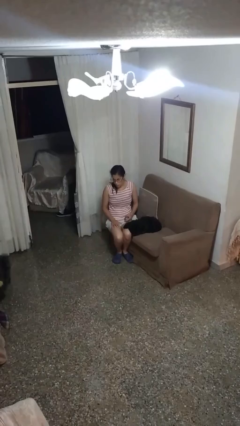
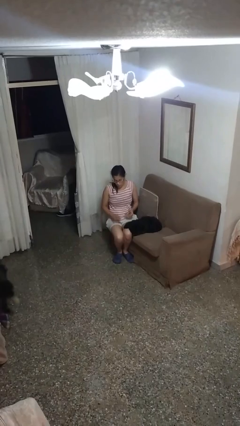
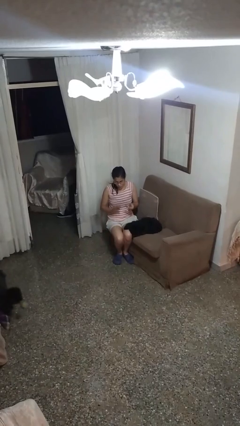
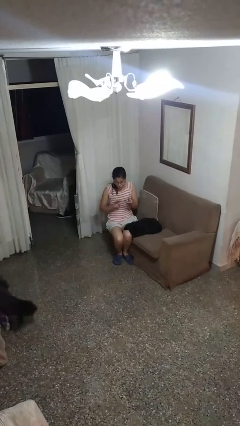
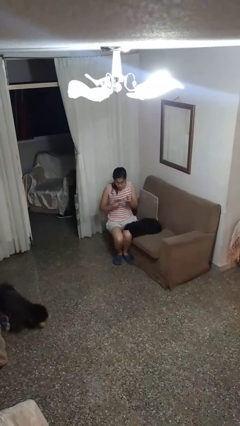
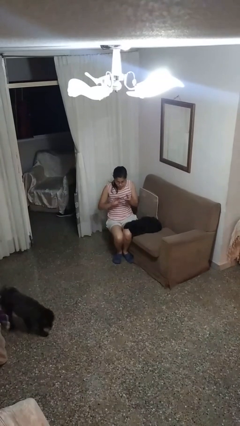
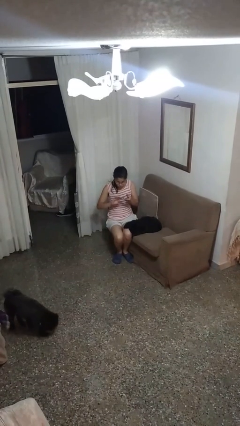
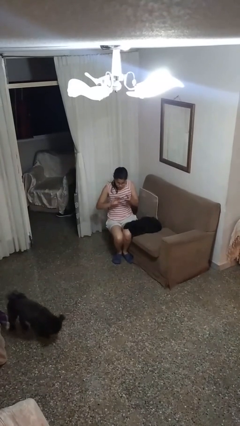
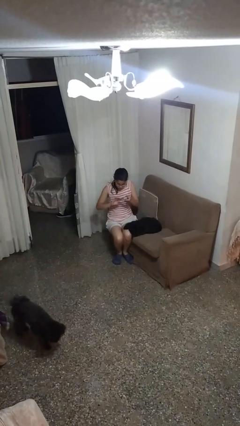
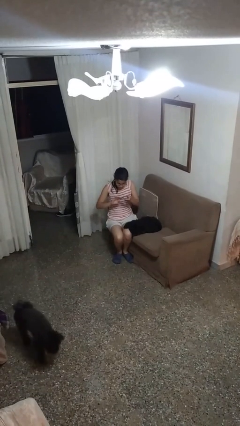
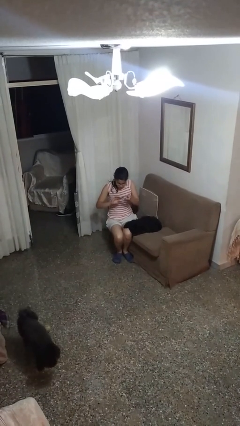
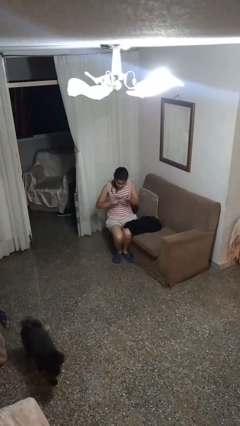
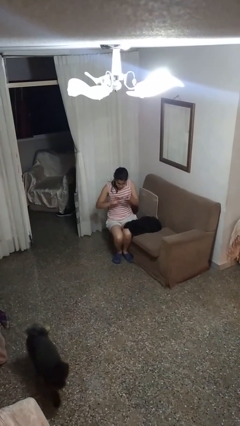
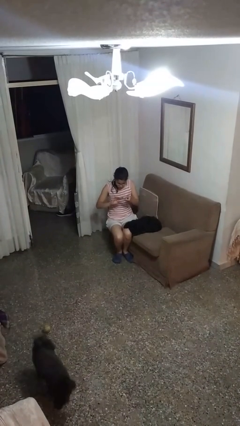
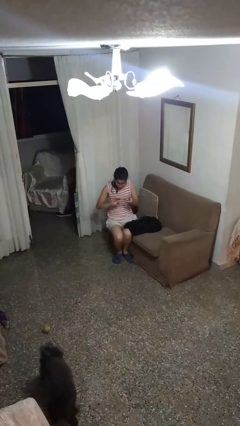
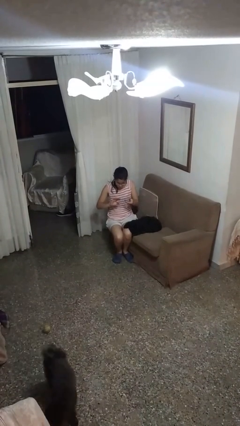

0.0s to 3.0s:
person clips fingernails

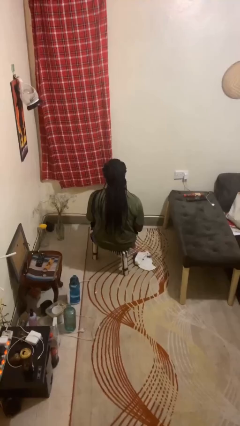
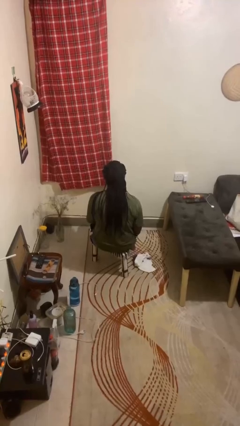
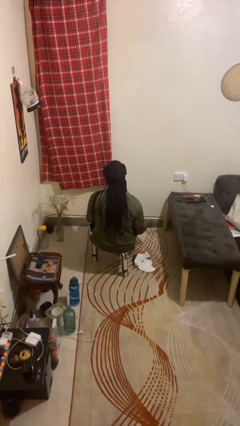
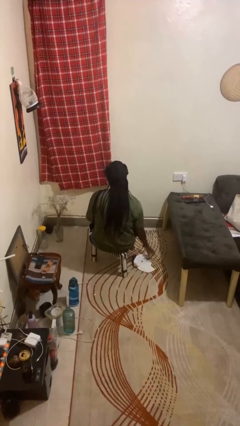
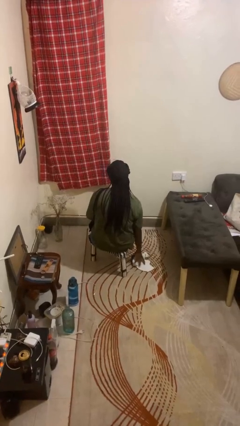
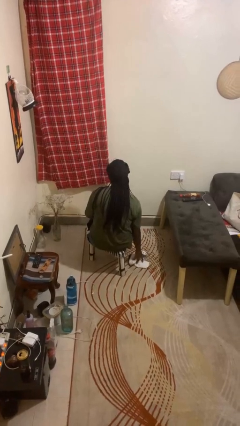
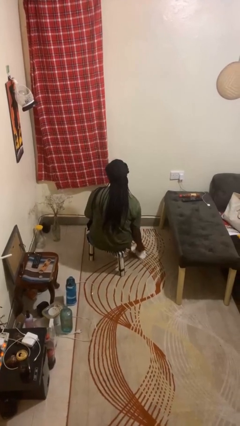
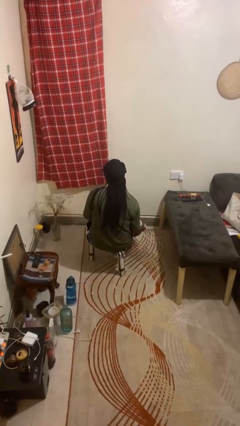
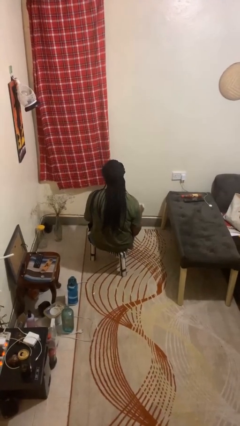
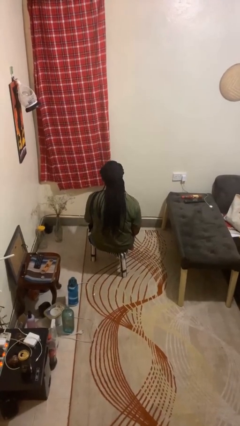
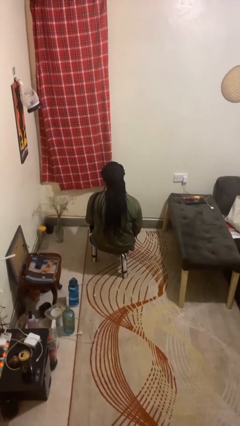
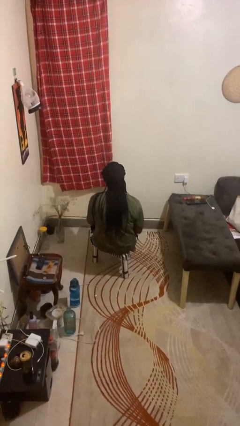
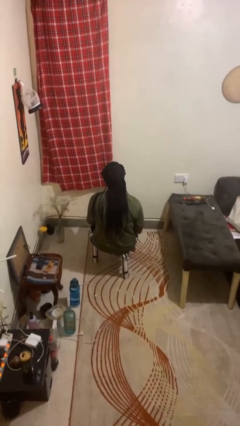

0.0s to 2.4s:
person picks up object from floor

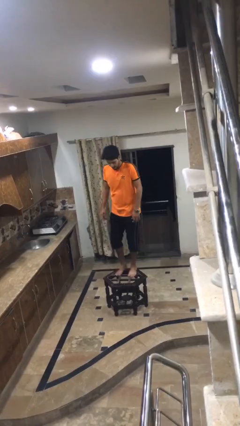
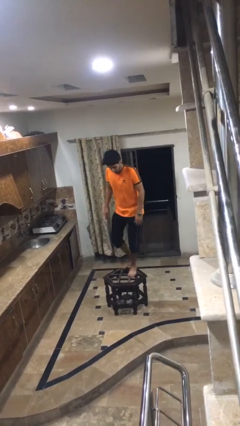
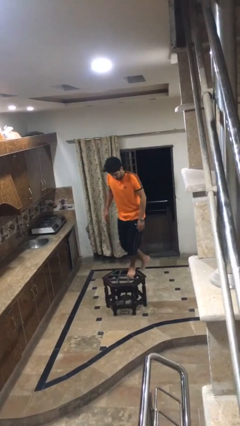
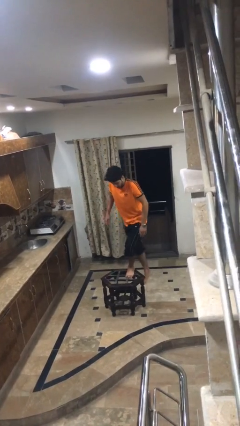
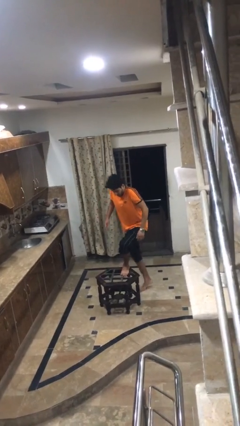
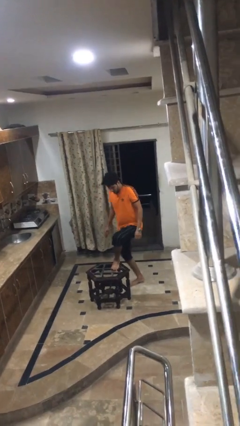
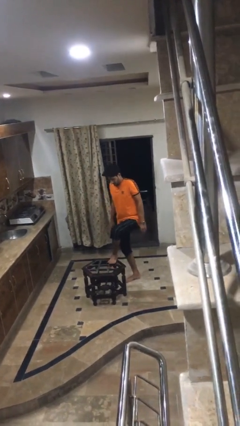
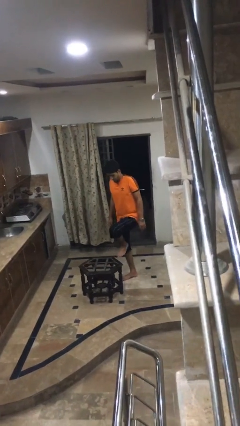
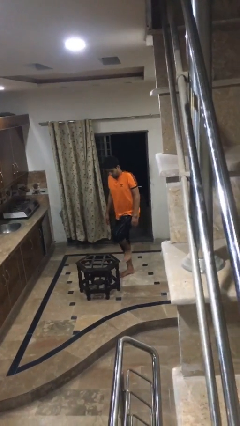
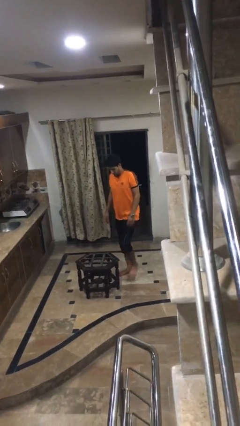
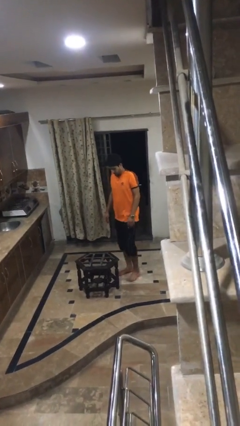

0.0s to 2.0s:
person climbs off table

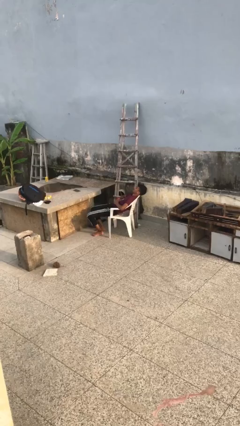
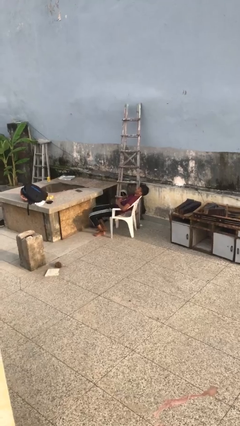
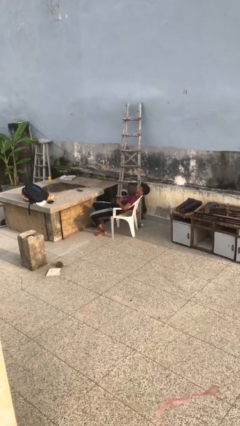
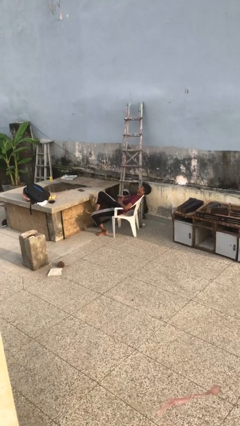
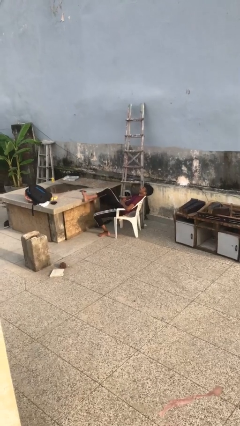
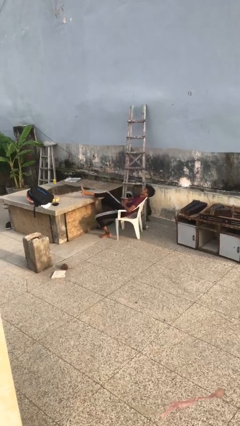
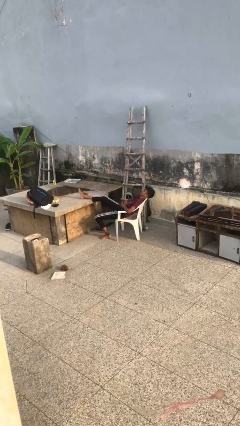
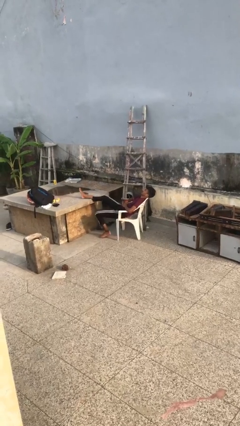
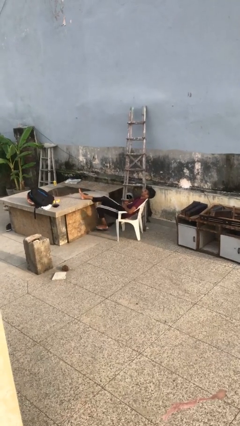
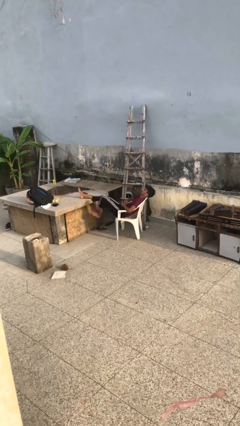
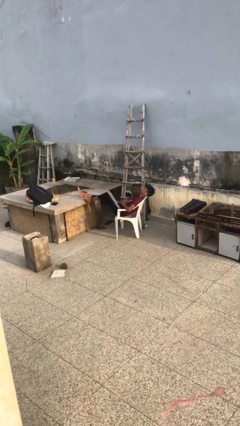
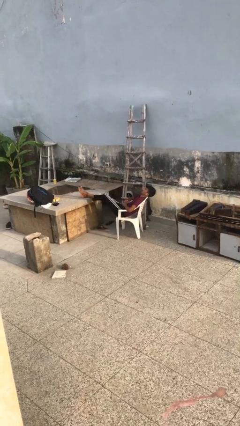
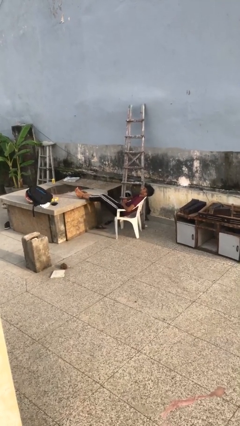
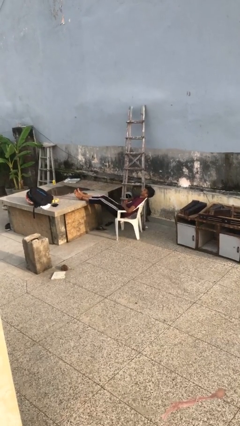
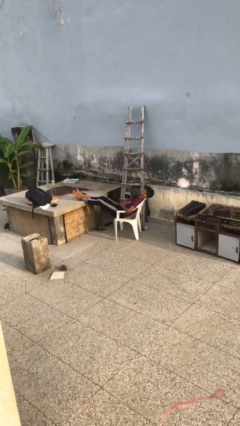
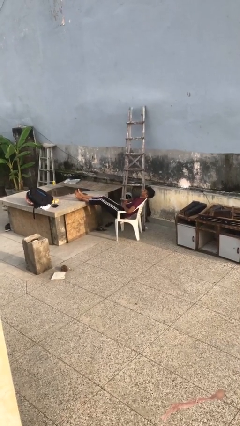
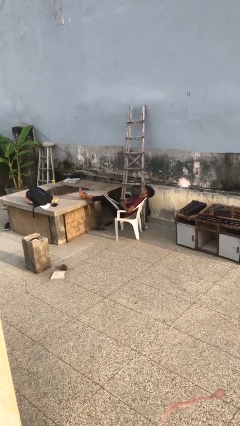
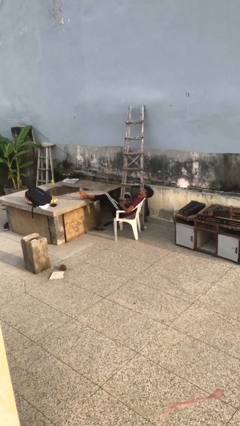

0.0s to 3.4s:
person puts feet up

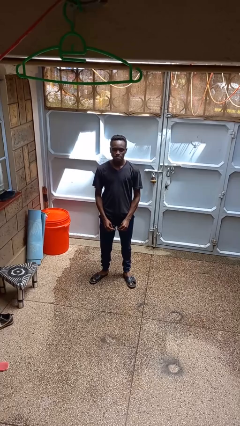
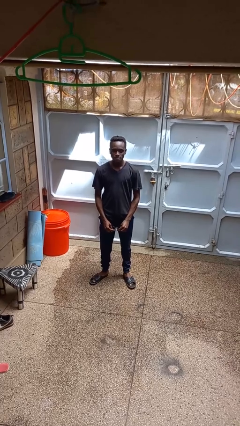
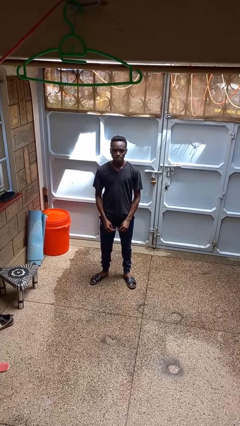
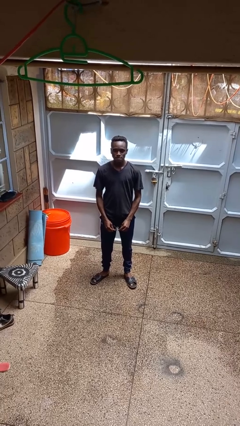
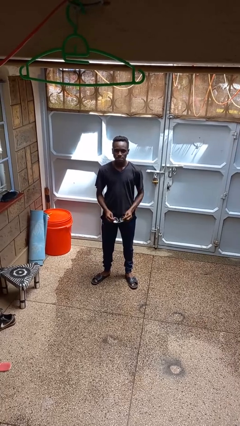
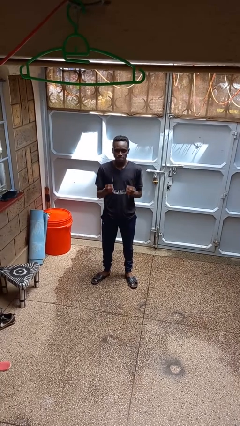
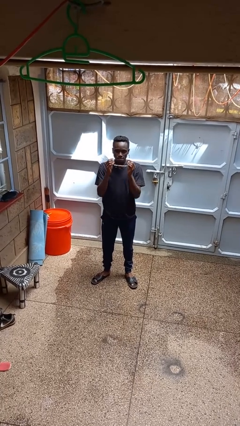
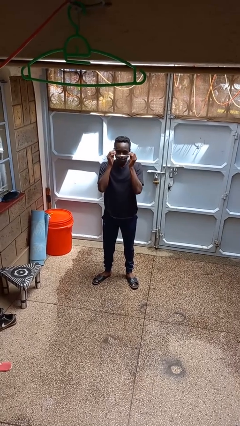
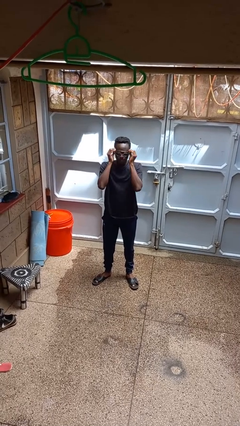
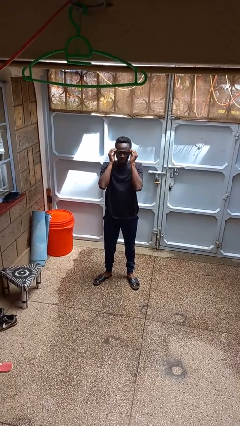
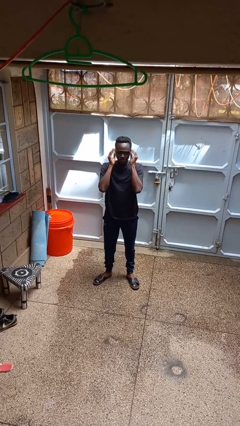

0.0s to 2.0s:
person puts on sunglasses

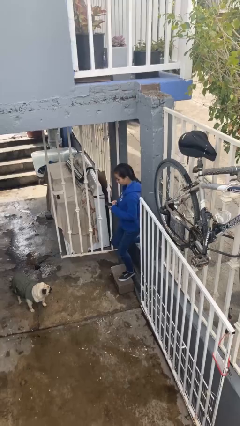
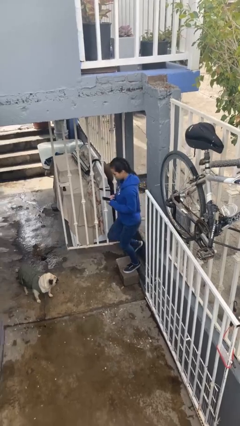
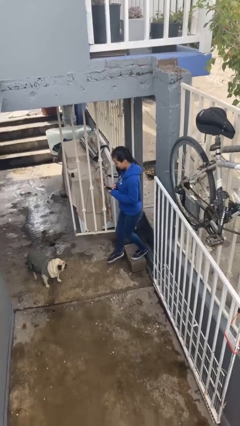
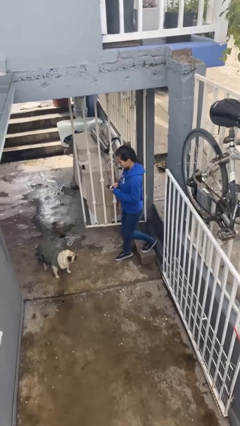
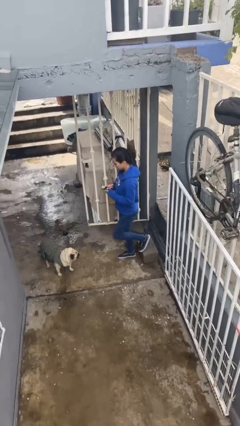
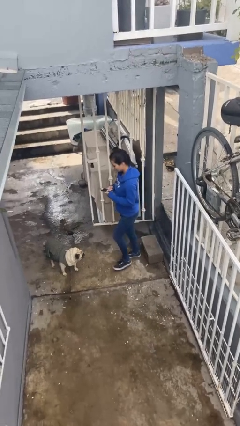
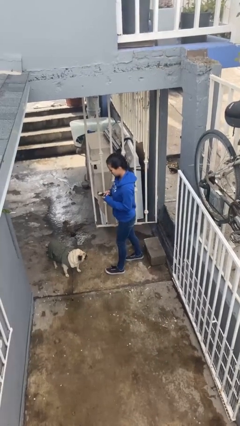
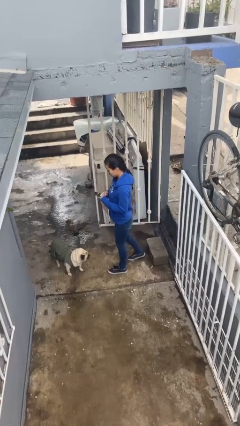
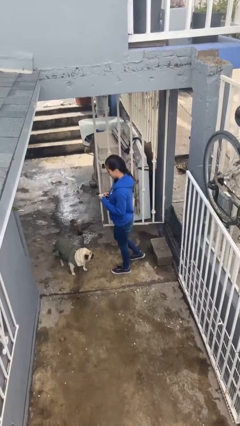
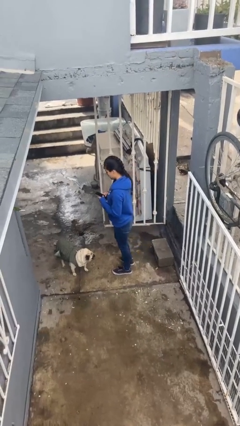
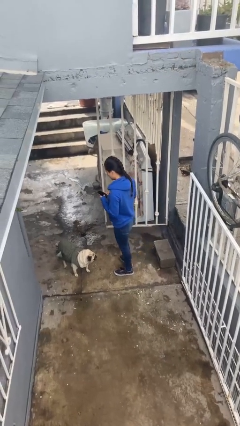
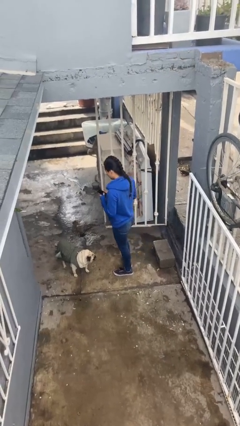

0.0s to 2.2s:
person enters scene through structure

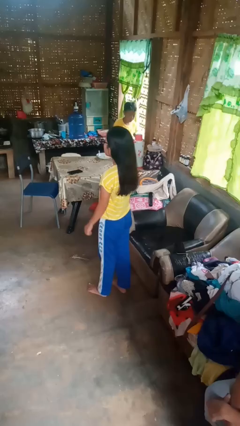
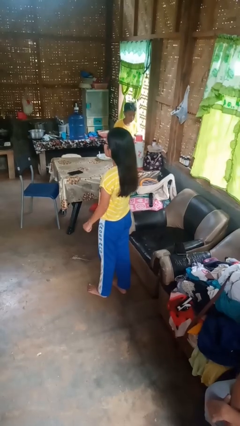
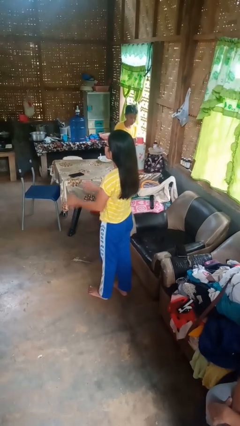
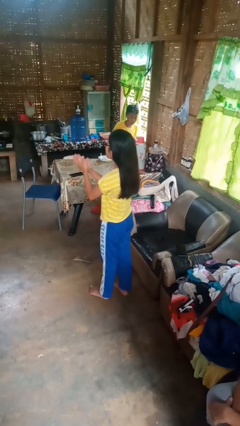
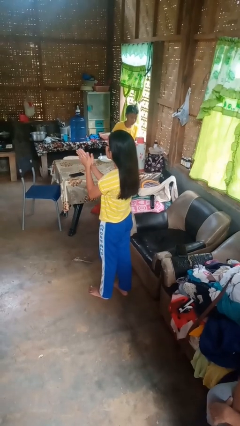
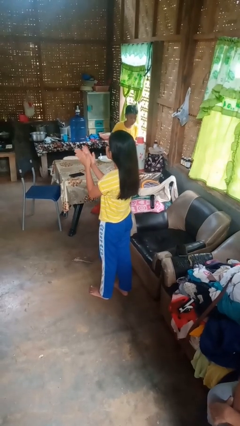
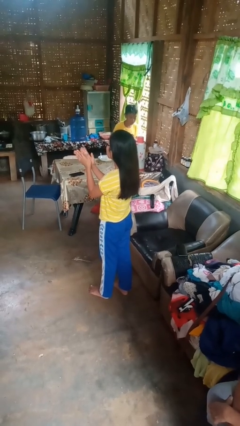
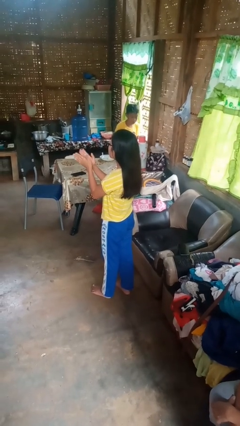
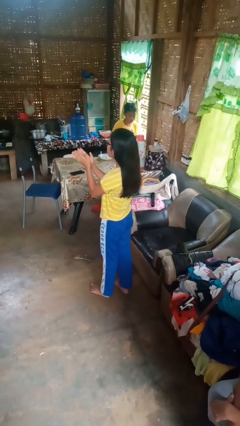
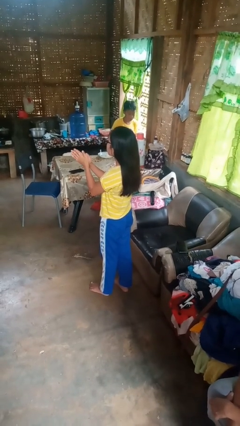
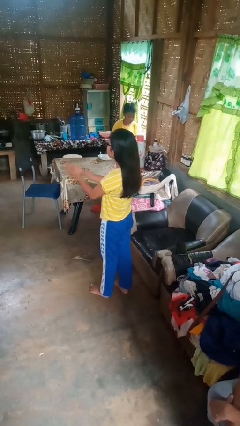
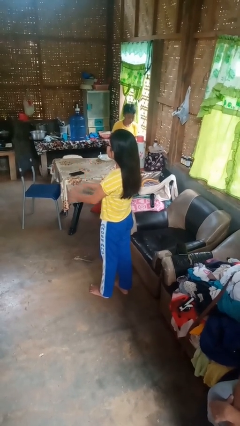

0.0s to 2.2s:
person claps hands
